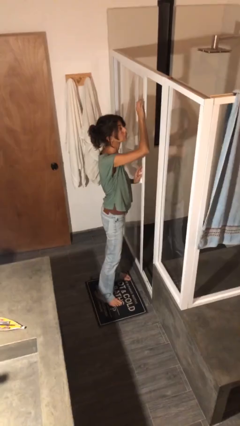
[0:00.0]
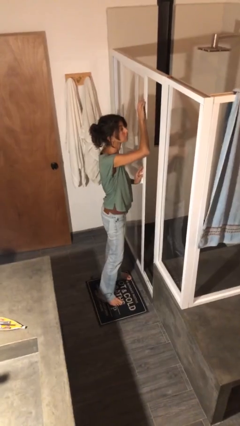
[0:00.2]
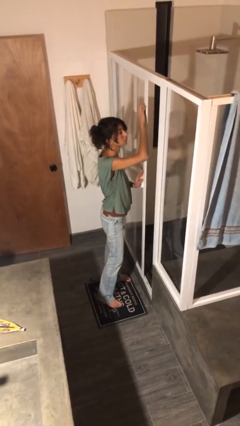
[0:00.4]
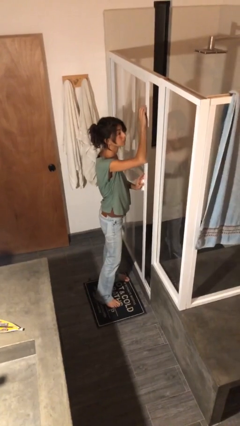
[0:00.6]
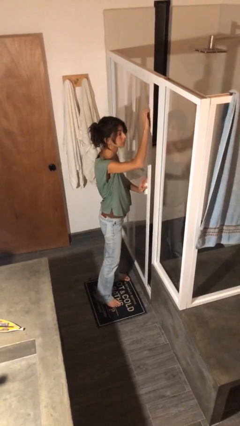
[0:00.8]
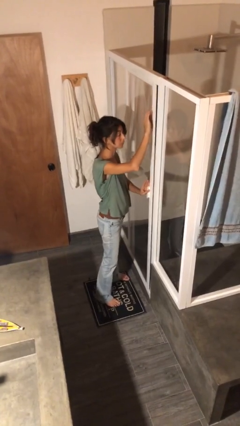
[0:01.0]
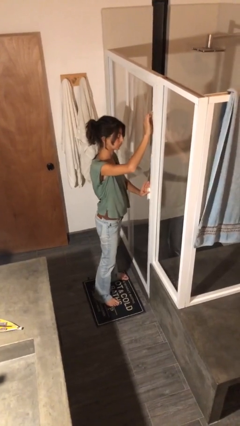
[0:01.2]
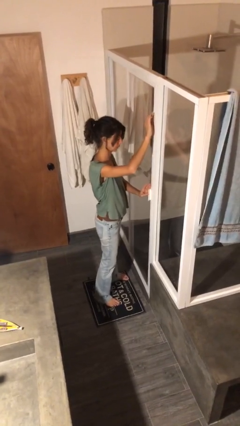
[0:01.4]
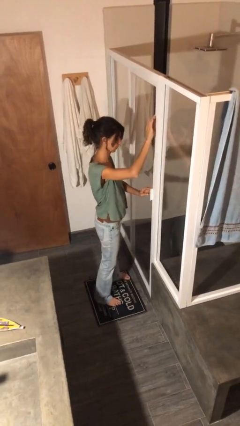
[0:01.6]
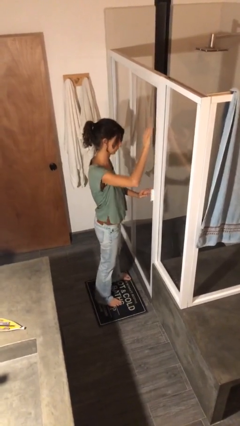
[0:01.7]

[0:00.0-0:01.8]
person closes sliding door

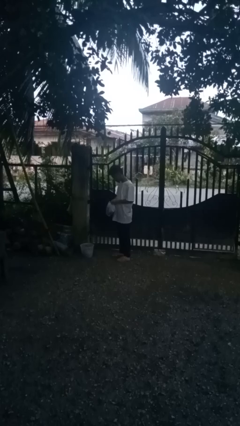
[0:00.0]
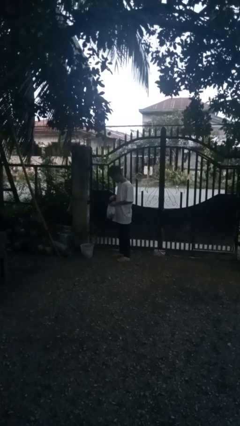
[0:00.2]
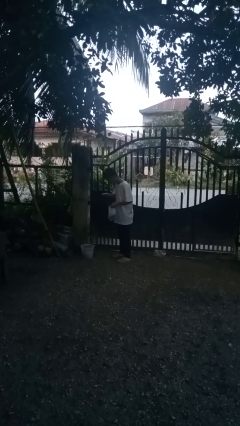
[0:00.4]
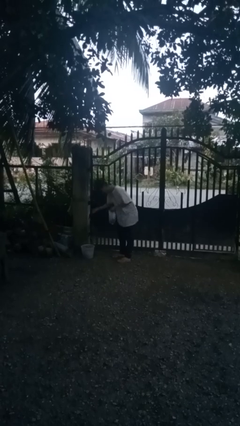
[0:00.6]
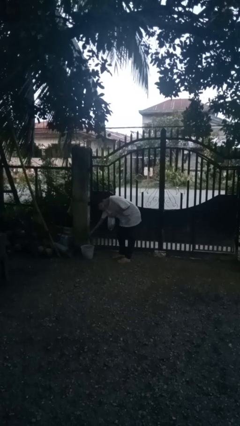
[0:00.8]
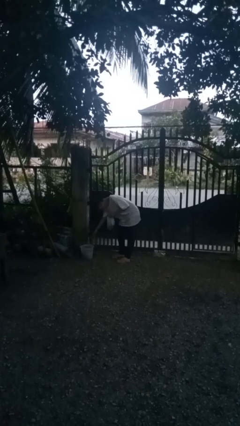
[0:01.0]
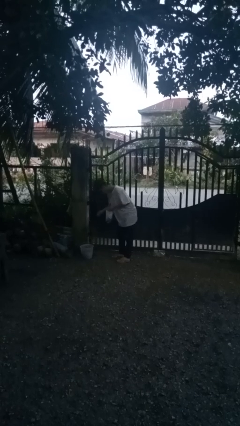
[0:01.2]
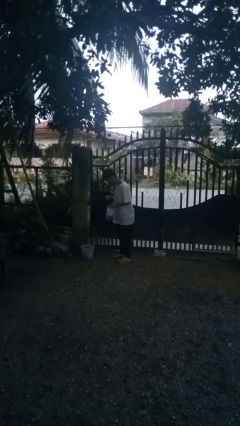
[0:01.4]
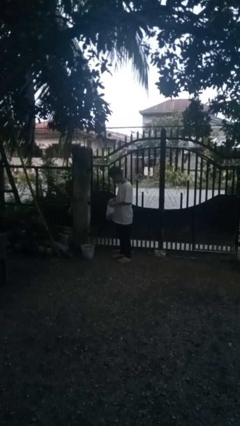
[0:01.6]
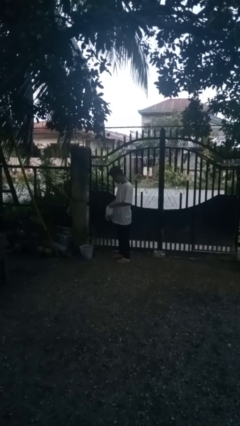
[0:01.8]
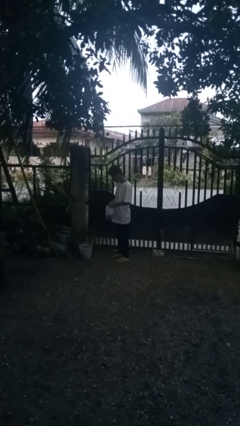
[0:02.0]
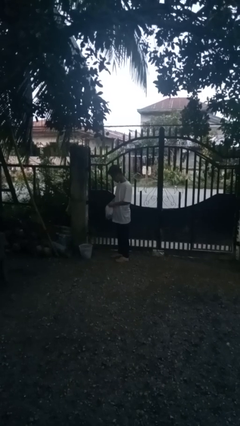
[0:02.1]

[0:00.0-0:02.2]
person discards trash

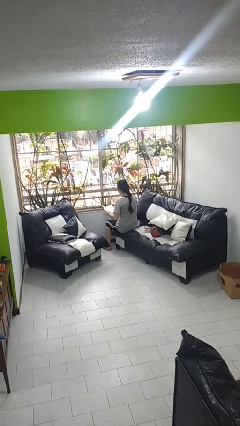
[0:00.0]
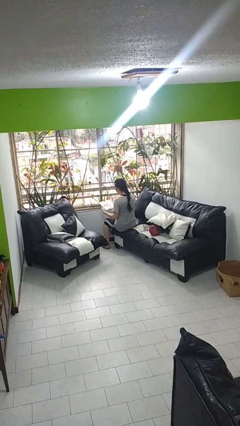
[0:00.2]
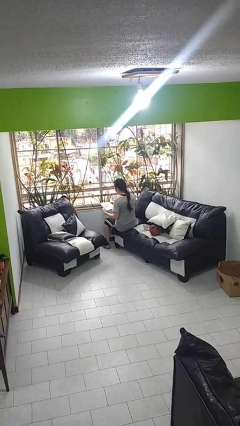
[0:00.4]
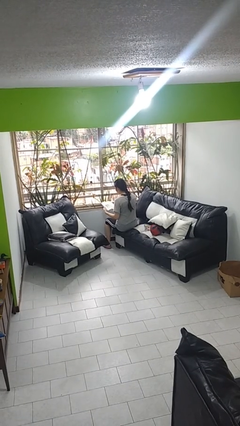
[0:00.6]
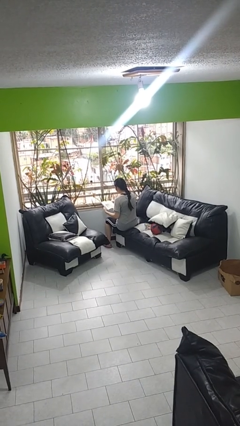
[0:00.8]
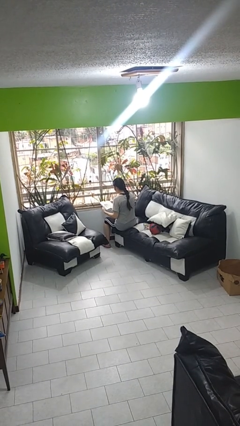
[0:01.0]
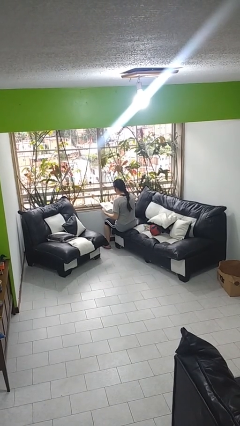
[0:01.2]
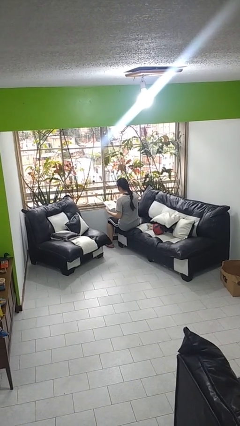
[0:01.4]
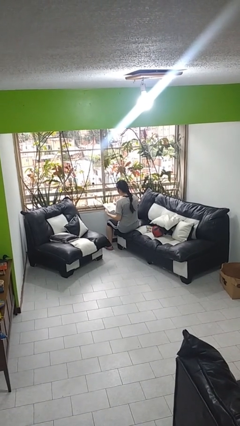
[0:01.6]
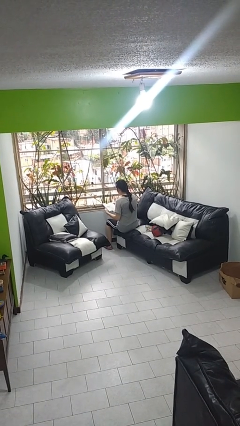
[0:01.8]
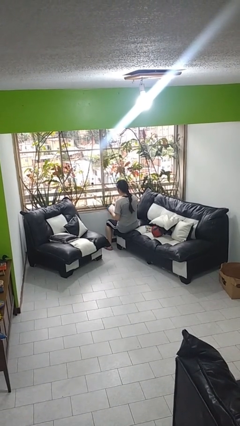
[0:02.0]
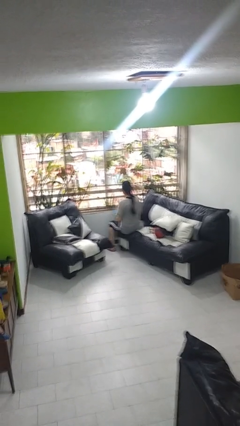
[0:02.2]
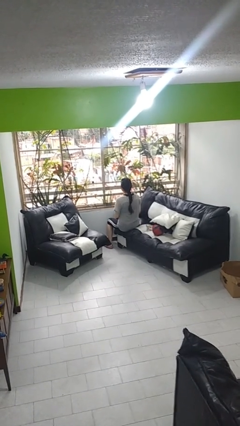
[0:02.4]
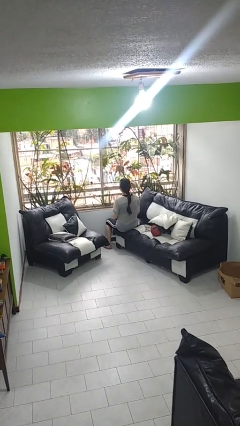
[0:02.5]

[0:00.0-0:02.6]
person reads book

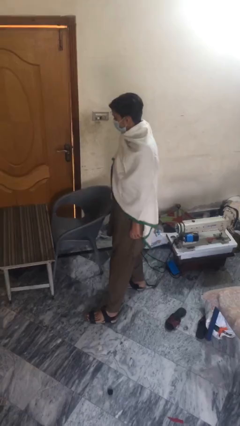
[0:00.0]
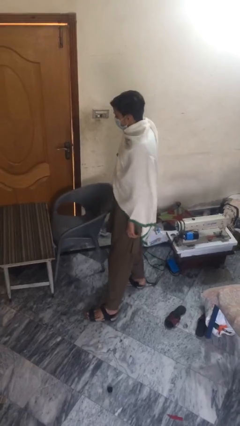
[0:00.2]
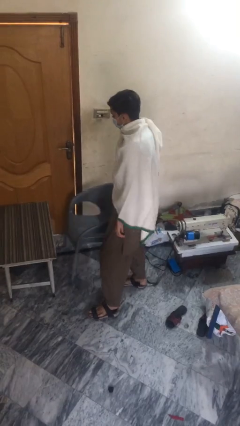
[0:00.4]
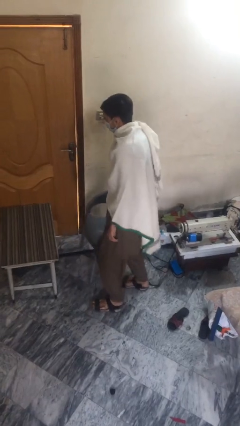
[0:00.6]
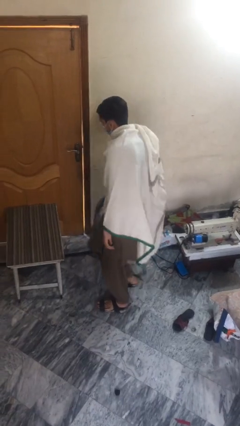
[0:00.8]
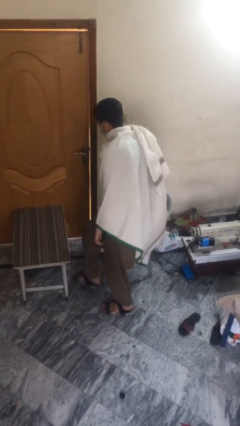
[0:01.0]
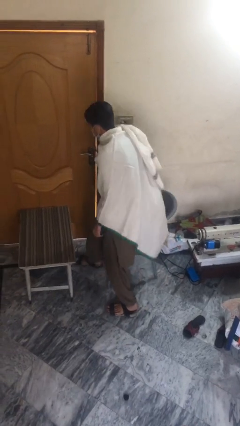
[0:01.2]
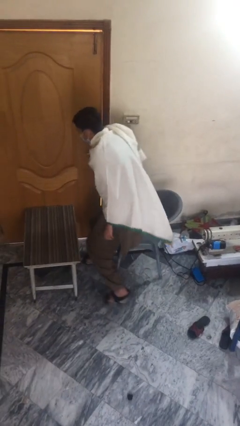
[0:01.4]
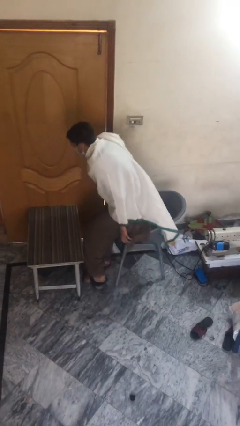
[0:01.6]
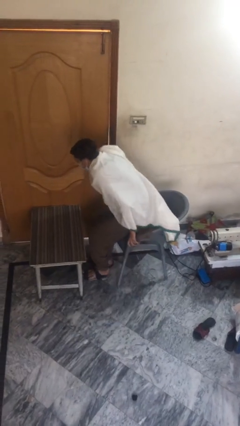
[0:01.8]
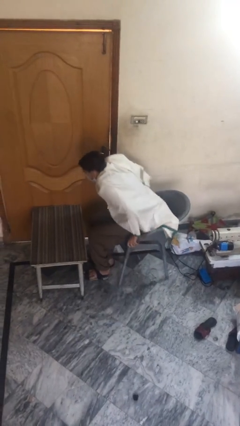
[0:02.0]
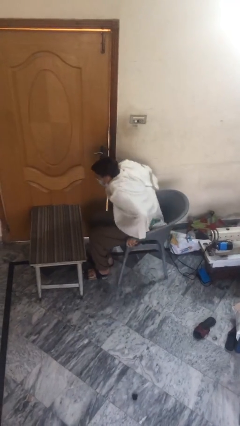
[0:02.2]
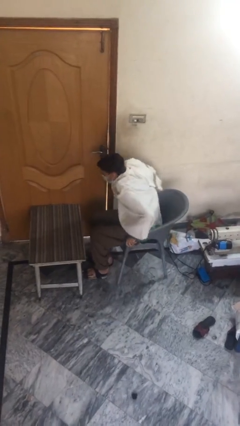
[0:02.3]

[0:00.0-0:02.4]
person sits down

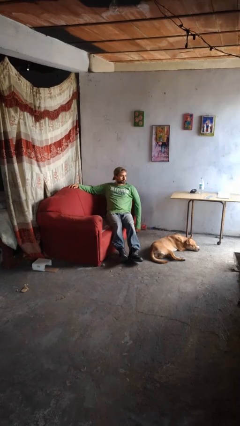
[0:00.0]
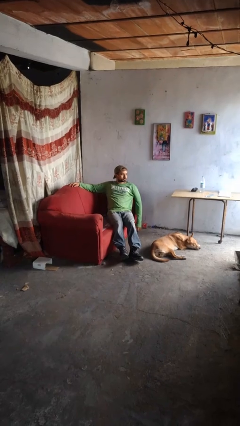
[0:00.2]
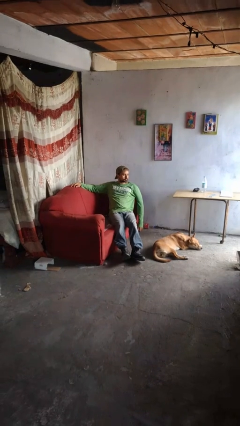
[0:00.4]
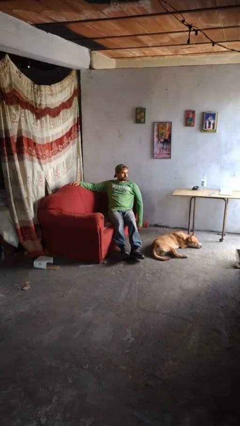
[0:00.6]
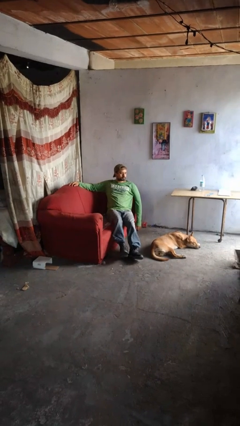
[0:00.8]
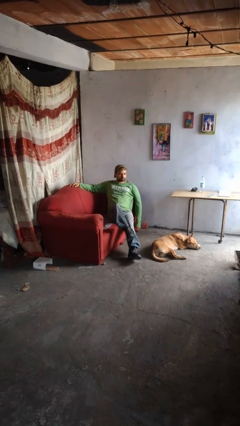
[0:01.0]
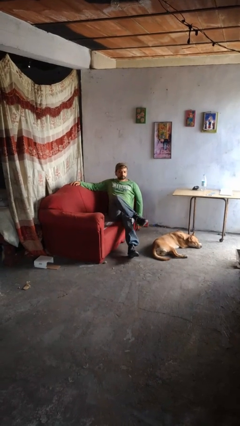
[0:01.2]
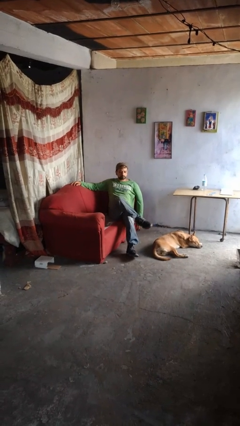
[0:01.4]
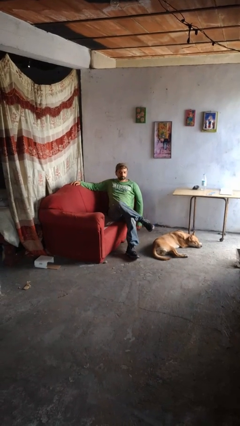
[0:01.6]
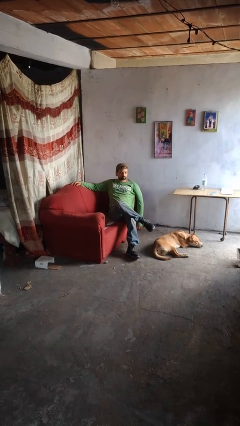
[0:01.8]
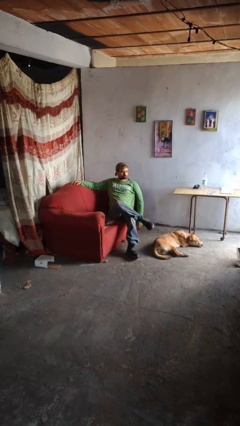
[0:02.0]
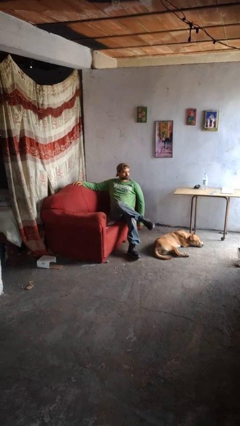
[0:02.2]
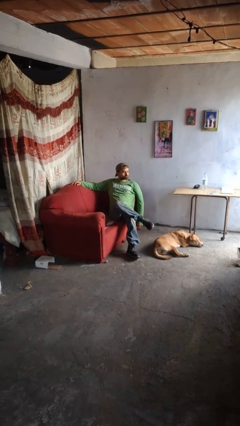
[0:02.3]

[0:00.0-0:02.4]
person crosses legs

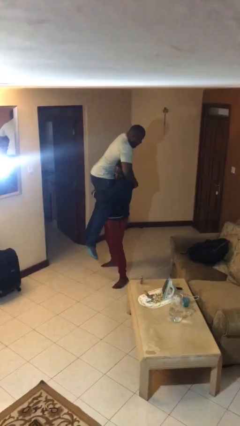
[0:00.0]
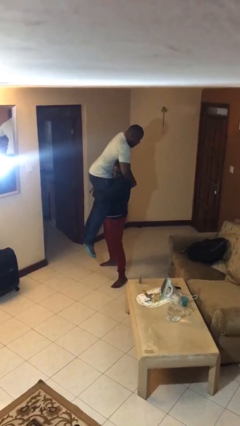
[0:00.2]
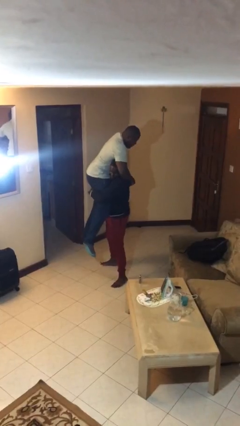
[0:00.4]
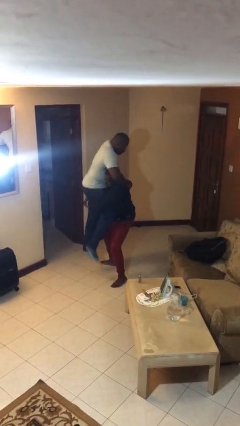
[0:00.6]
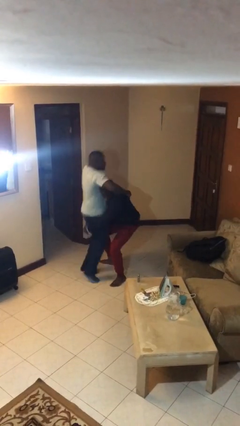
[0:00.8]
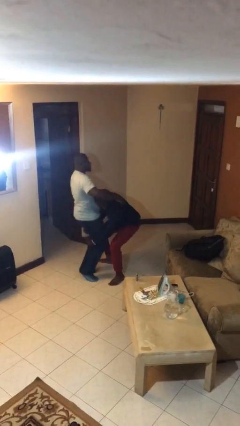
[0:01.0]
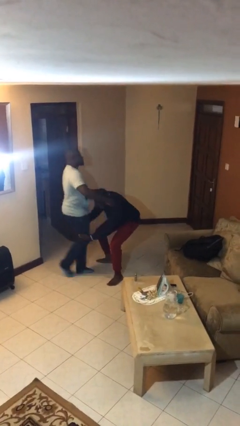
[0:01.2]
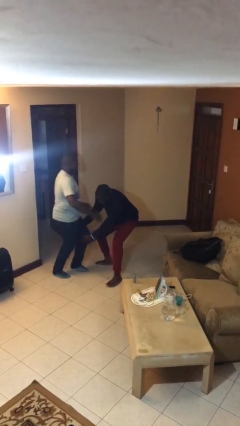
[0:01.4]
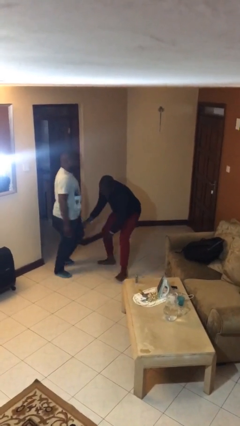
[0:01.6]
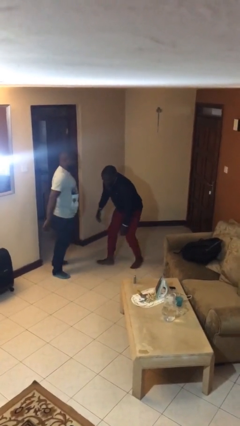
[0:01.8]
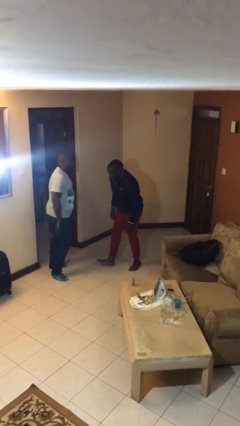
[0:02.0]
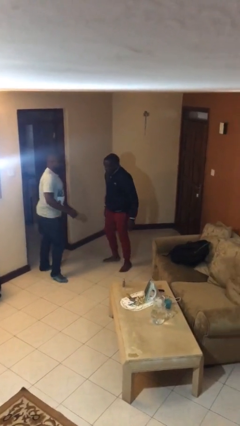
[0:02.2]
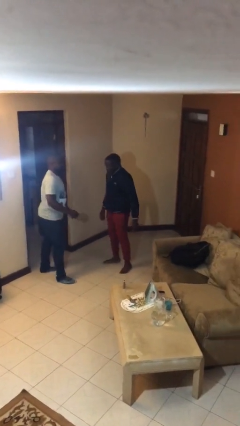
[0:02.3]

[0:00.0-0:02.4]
person puts down person

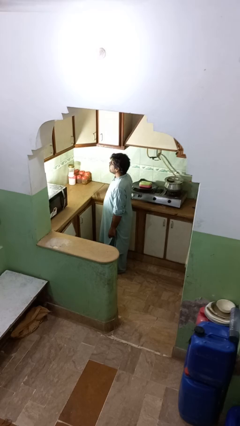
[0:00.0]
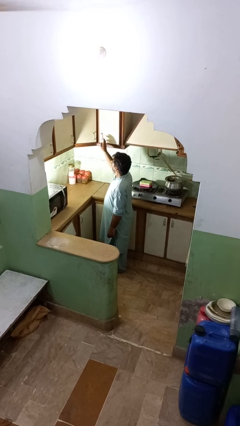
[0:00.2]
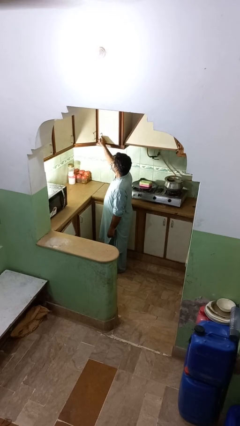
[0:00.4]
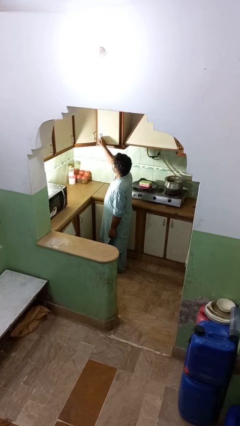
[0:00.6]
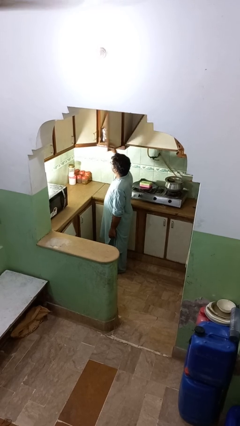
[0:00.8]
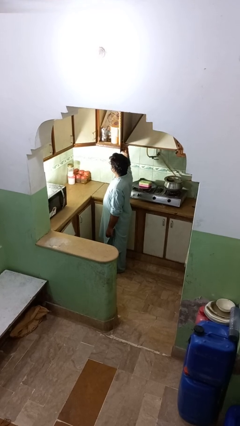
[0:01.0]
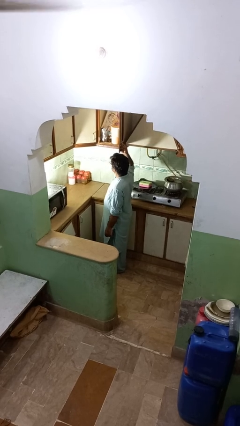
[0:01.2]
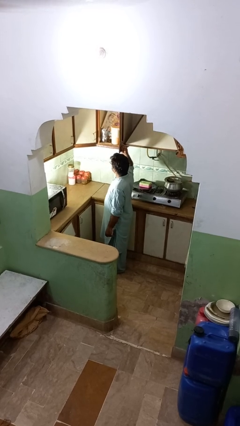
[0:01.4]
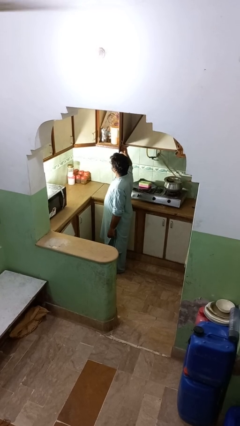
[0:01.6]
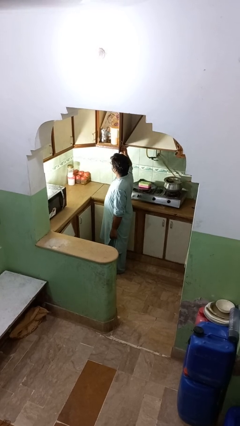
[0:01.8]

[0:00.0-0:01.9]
person opens kitchen drawer

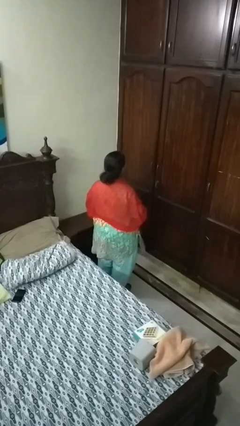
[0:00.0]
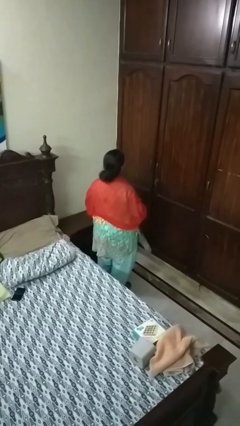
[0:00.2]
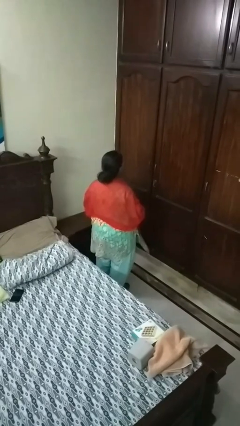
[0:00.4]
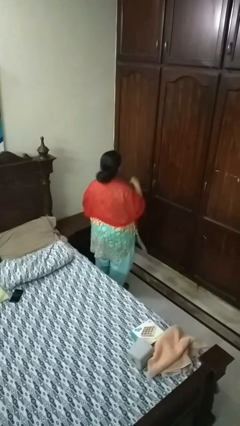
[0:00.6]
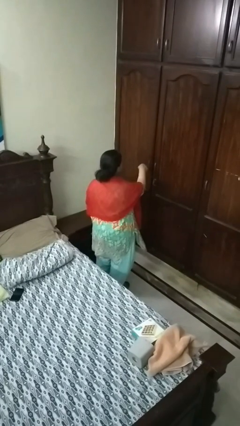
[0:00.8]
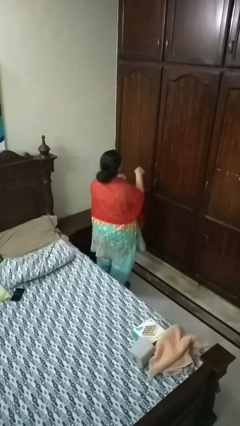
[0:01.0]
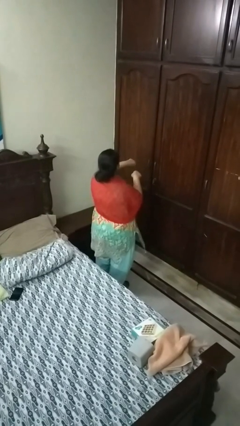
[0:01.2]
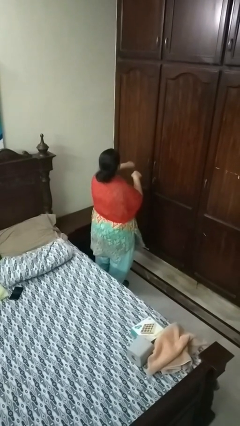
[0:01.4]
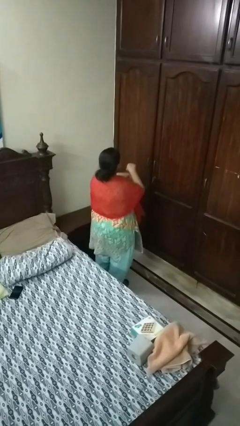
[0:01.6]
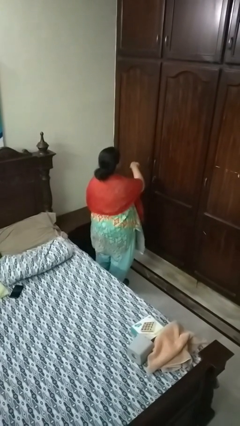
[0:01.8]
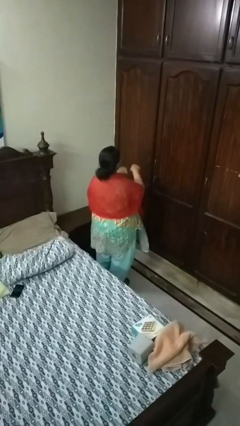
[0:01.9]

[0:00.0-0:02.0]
person punches
